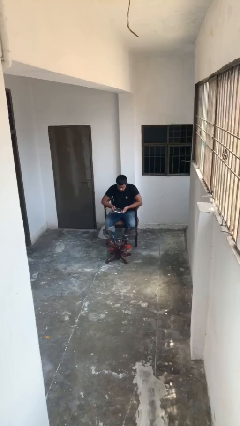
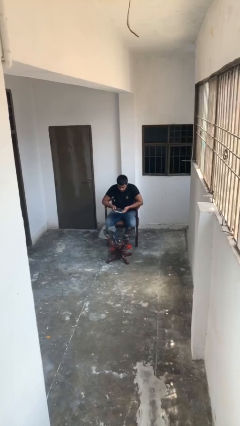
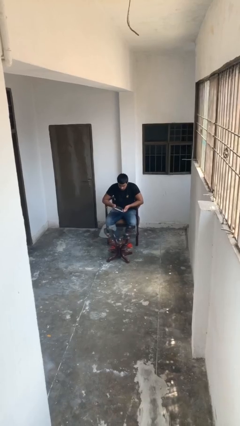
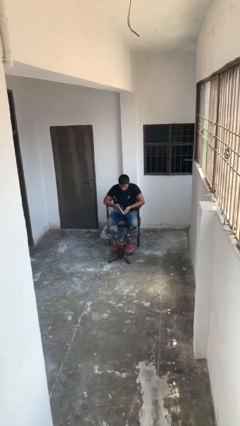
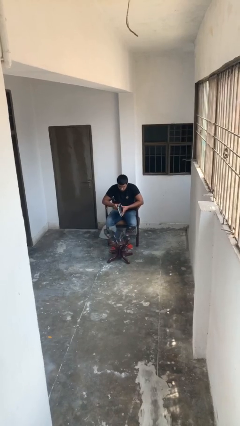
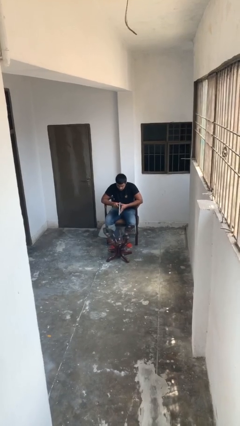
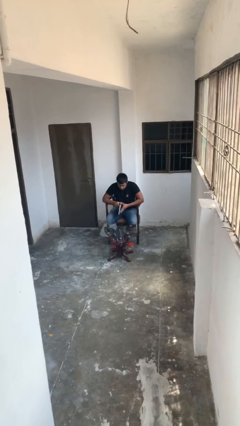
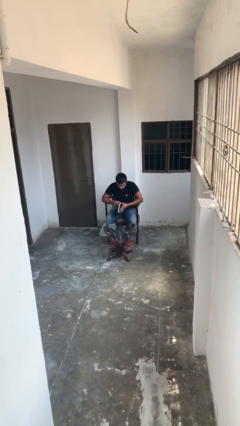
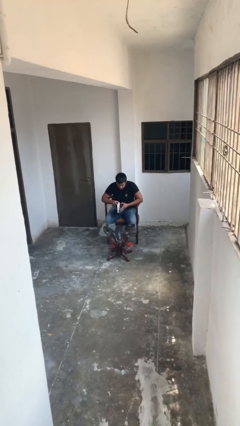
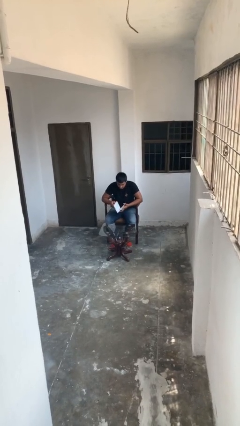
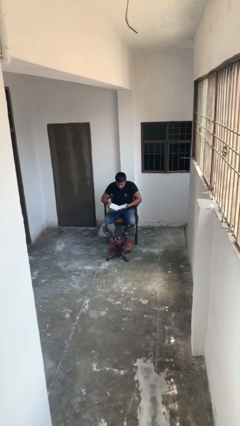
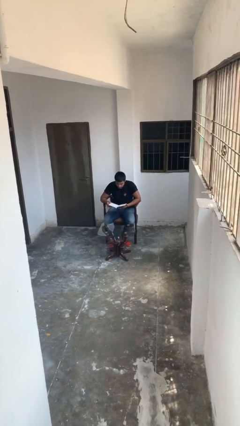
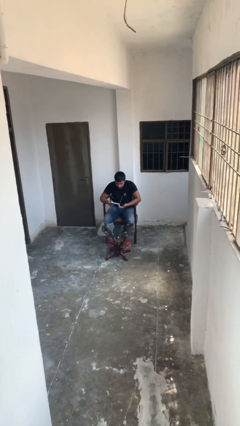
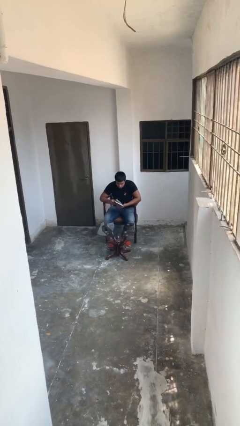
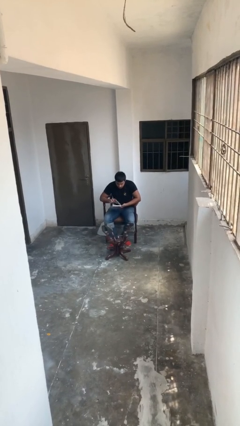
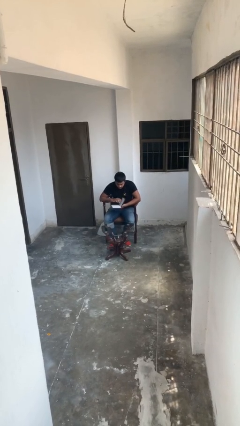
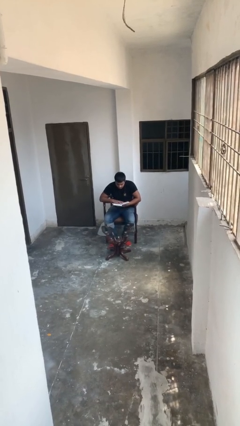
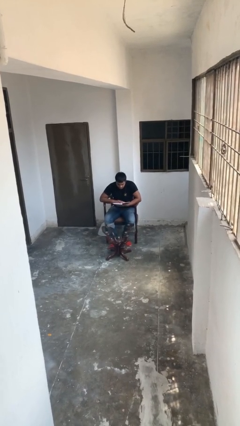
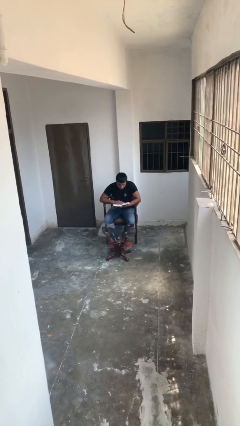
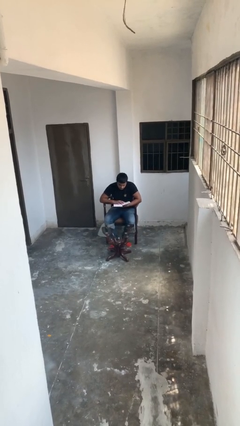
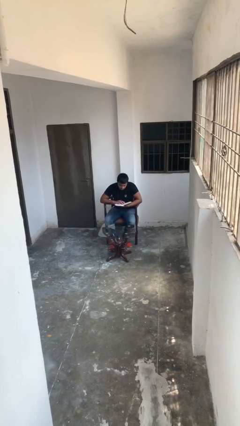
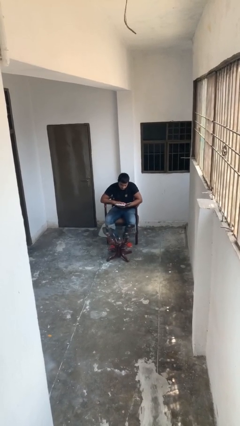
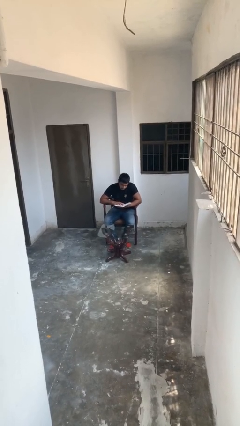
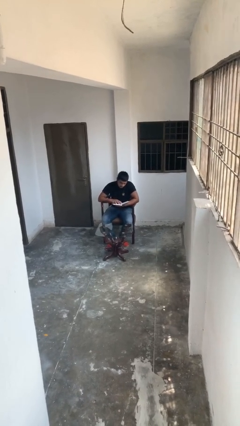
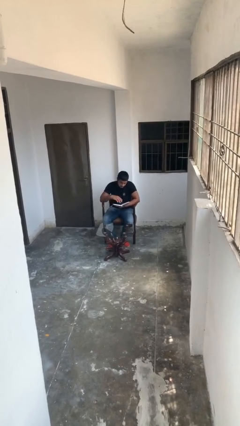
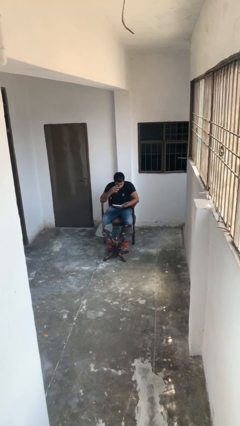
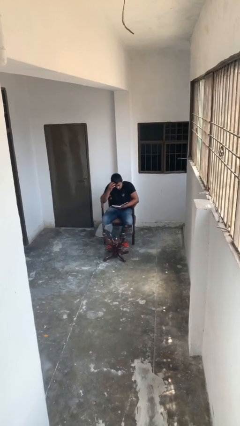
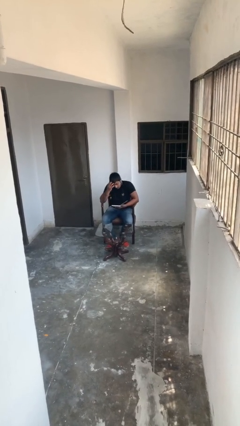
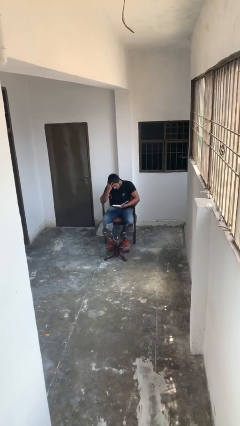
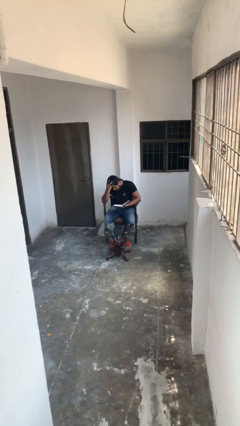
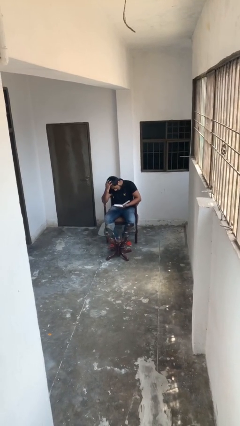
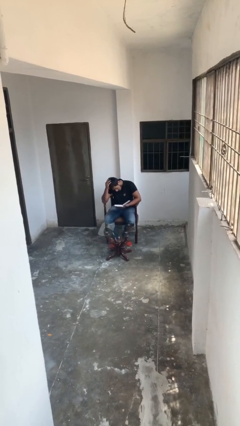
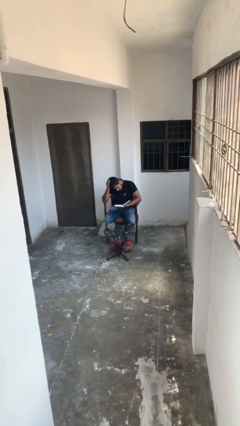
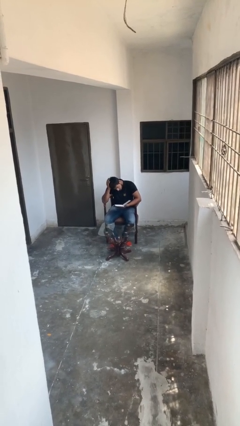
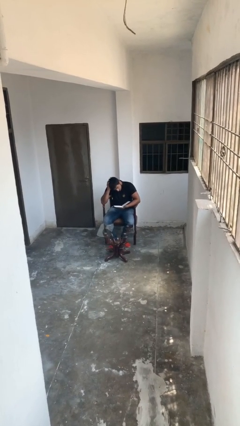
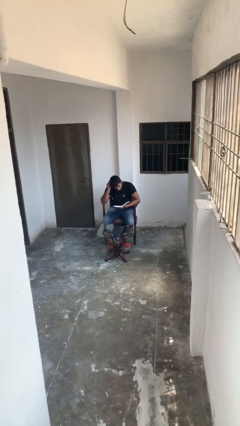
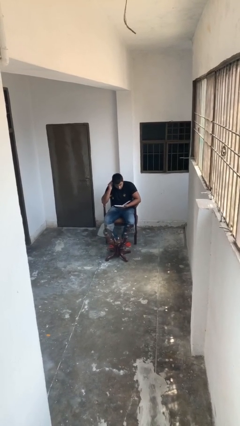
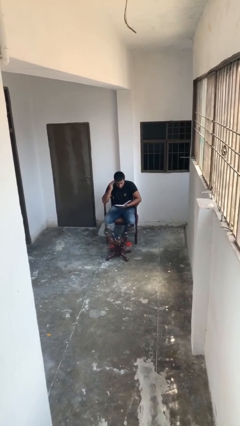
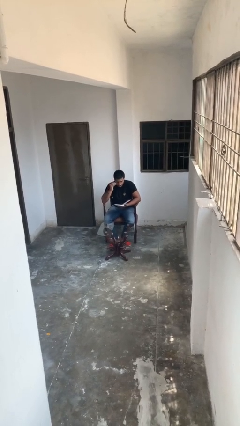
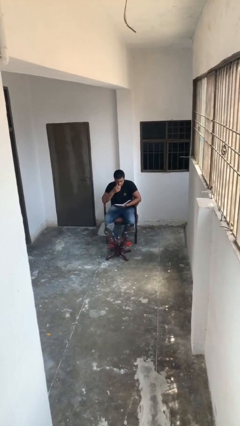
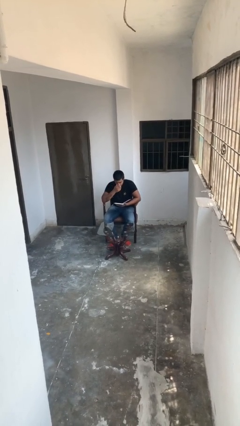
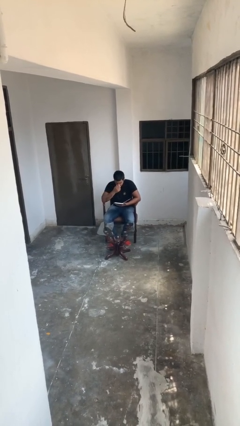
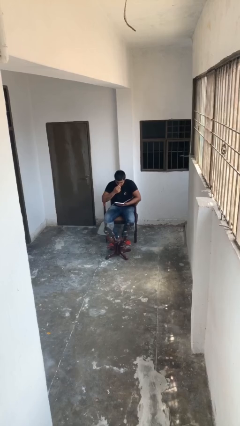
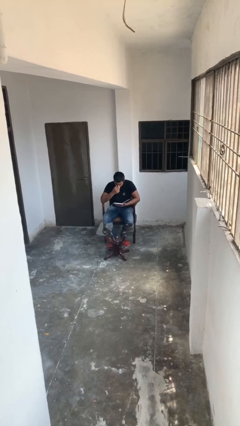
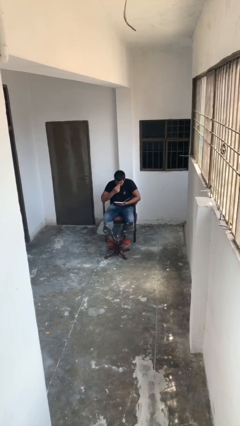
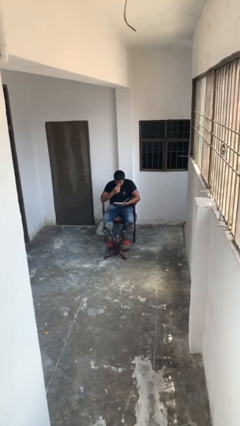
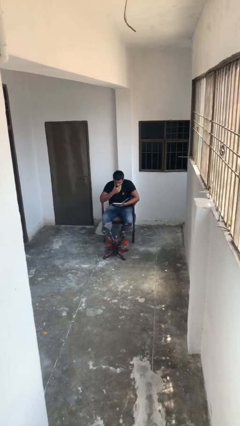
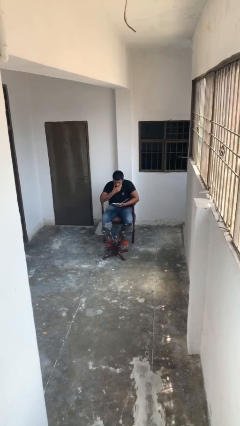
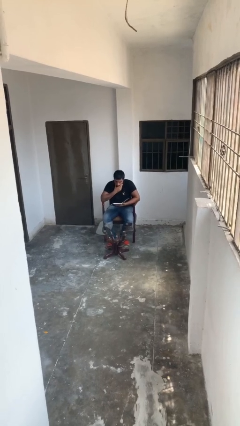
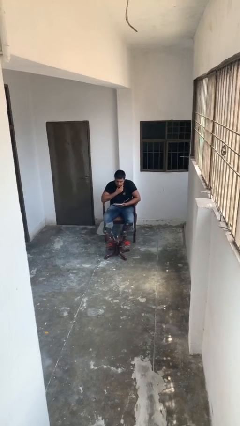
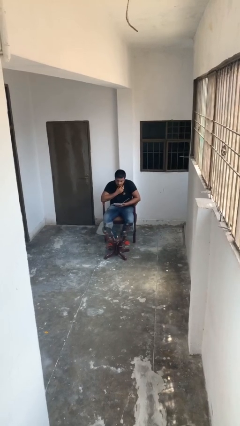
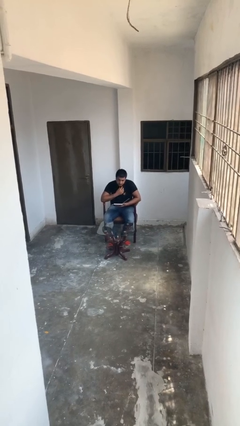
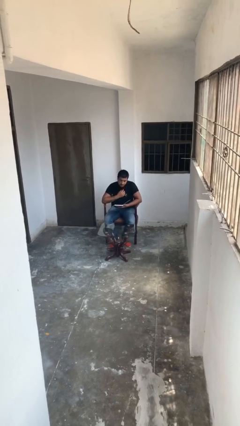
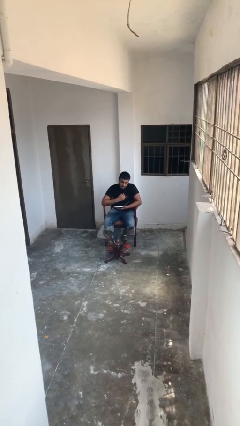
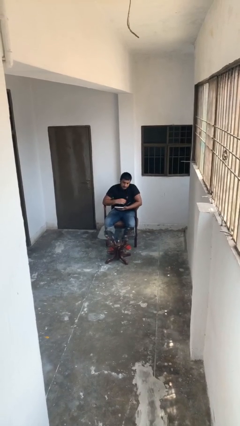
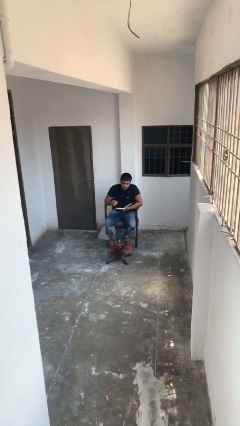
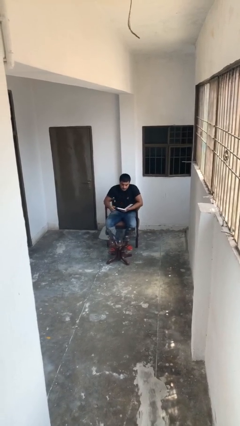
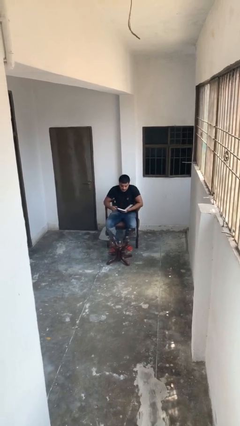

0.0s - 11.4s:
person reads document

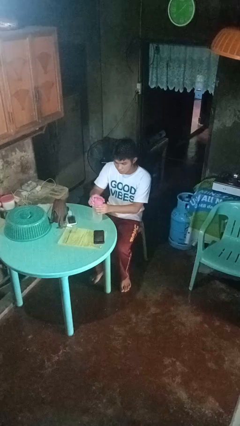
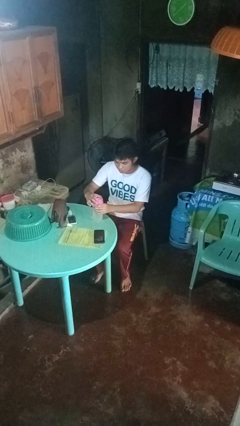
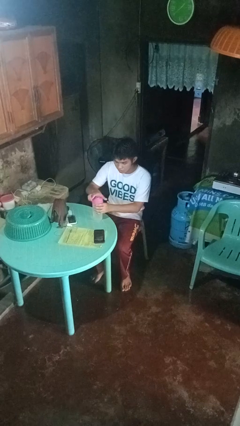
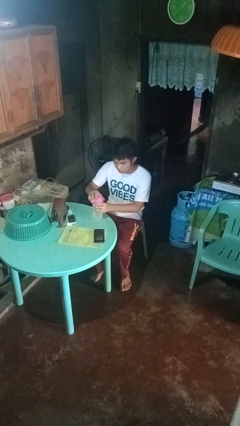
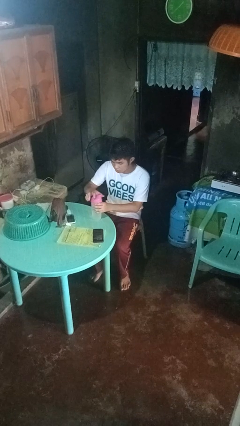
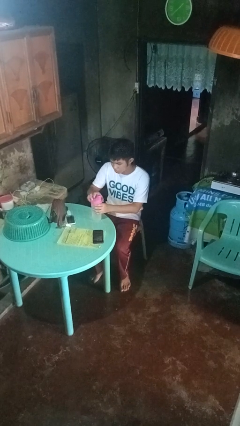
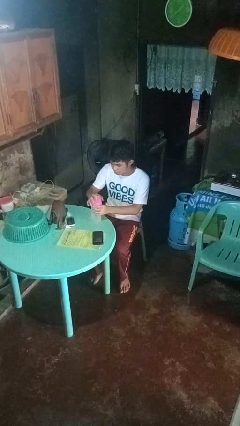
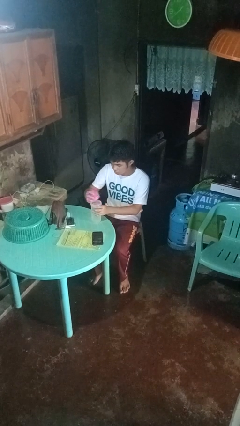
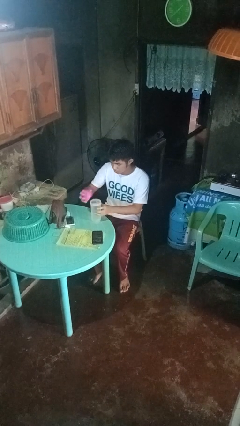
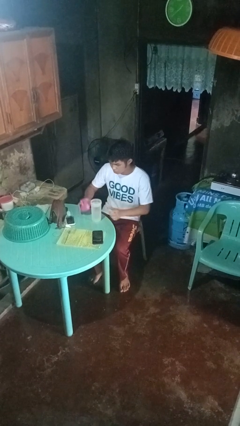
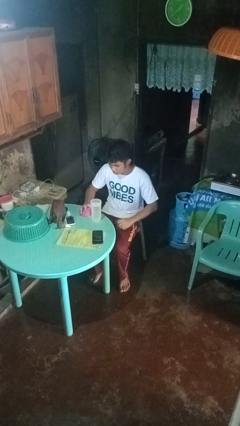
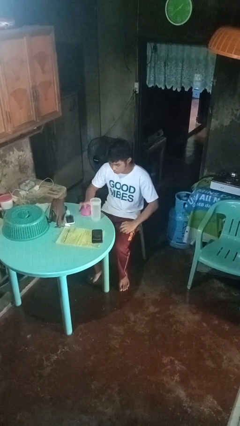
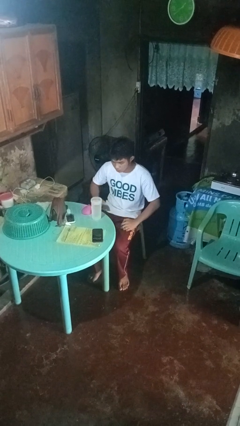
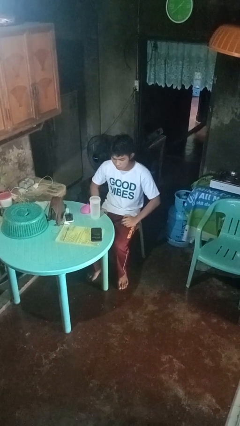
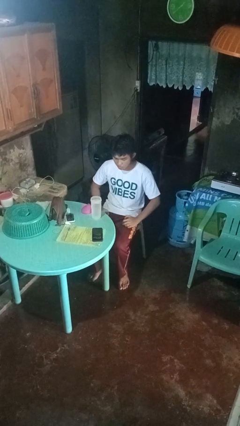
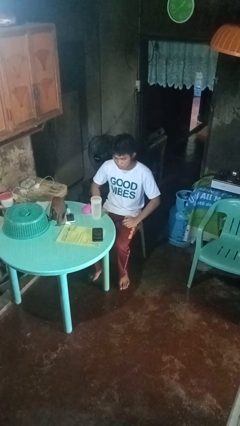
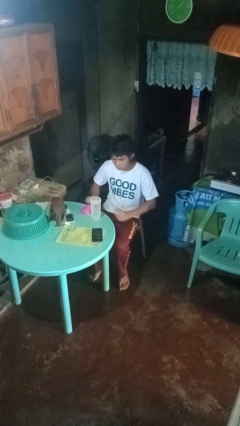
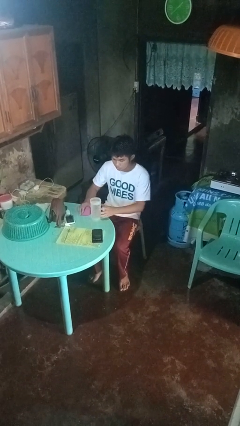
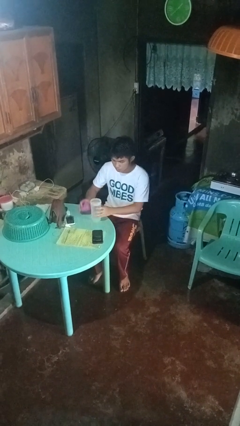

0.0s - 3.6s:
person unscrews lid from bottle

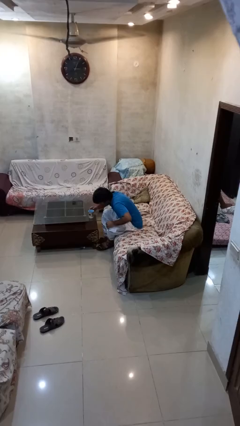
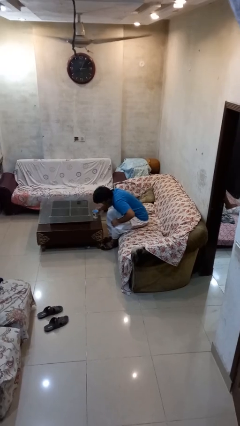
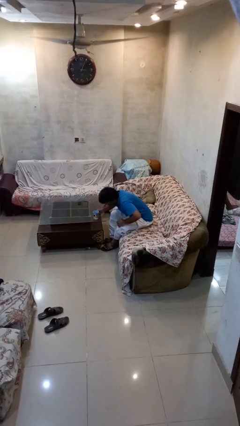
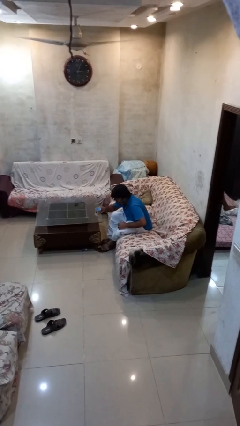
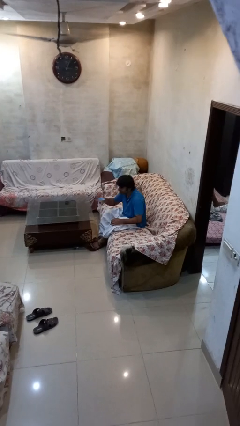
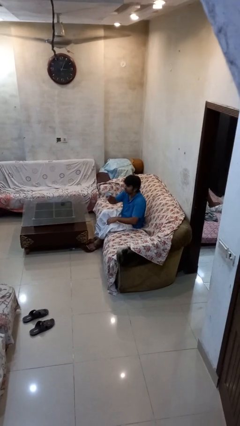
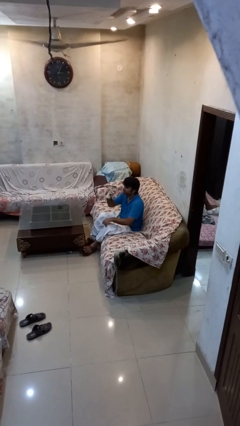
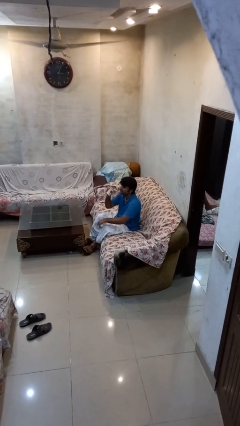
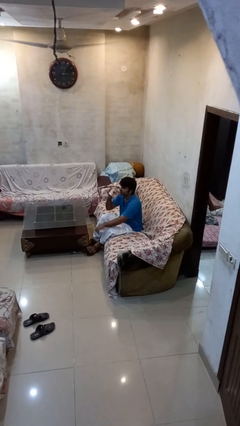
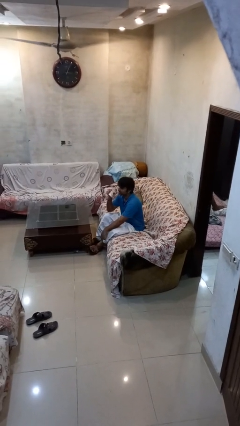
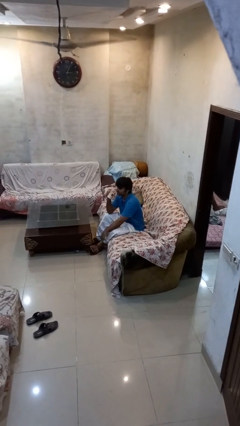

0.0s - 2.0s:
person picks up object from table

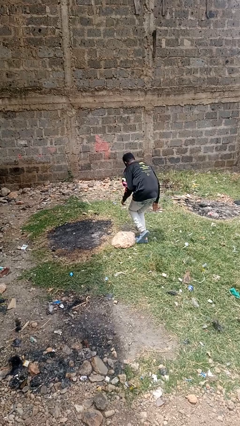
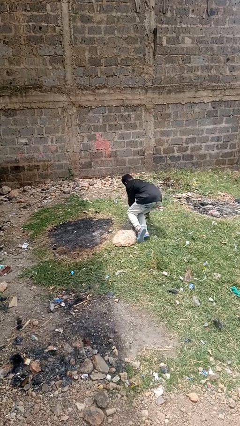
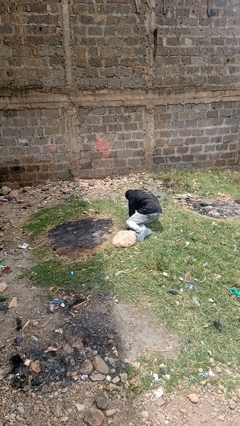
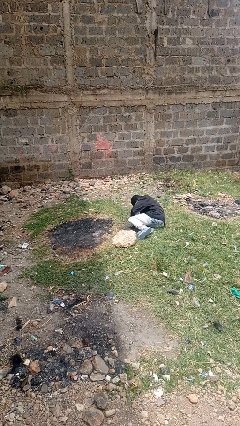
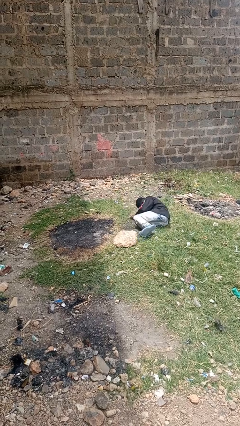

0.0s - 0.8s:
person trips on object on floor
